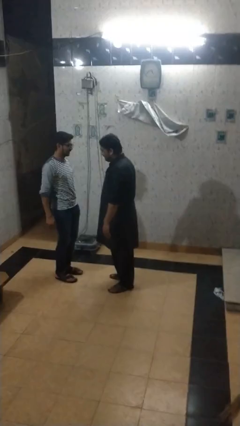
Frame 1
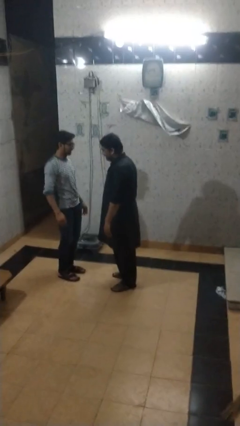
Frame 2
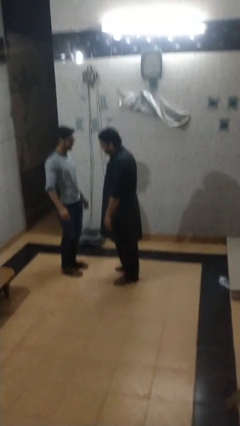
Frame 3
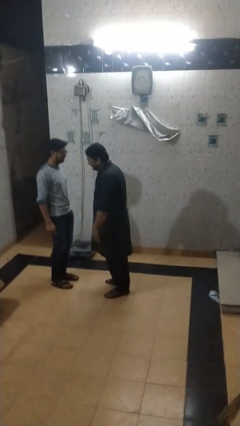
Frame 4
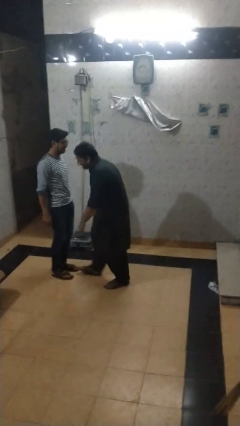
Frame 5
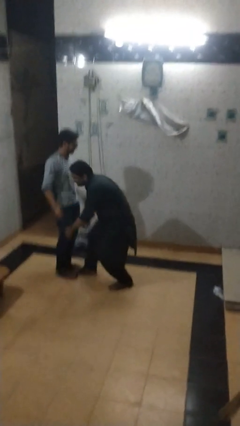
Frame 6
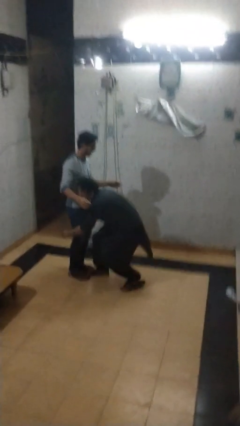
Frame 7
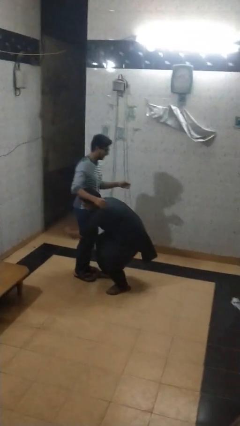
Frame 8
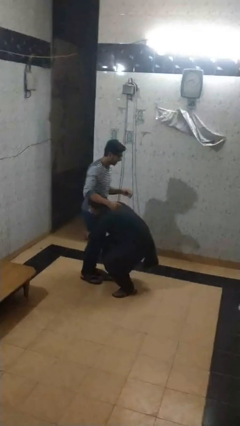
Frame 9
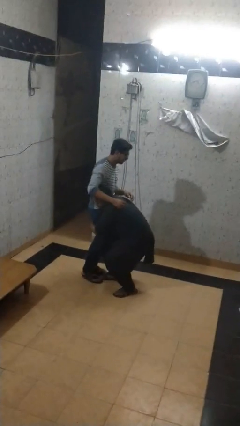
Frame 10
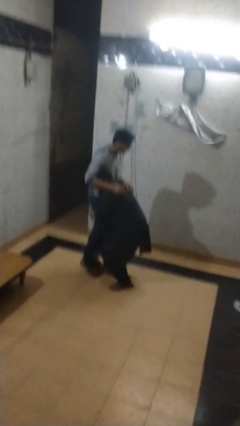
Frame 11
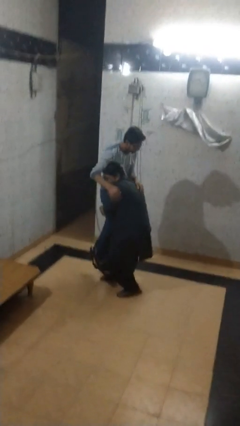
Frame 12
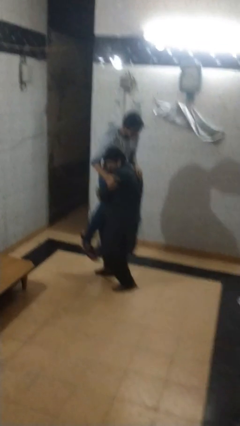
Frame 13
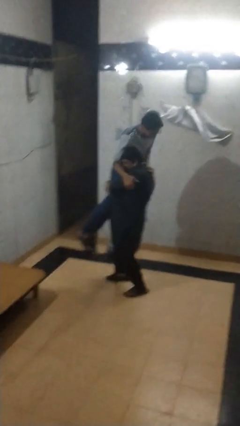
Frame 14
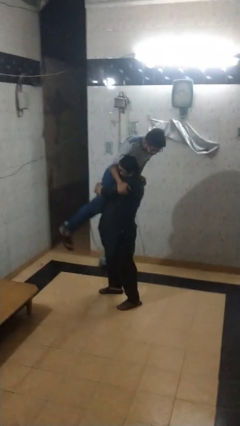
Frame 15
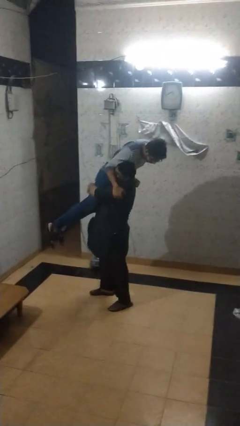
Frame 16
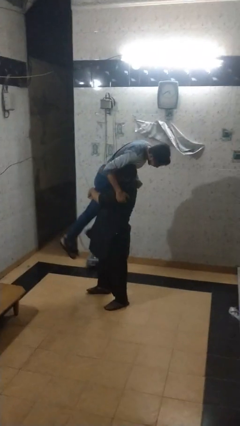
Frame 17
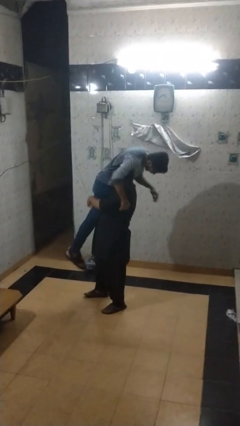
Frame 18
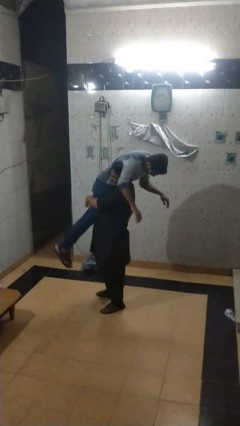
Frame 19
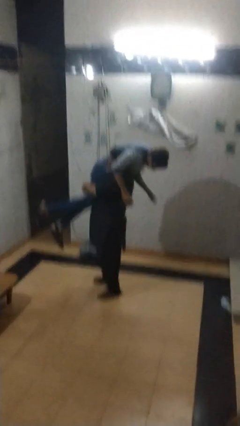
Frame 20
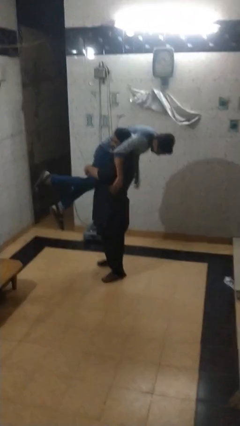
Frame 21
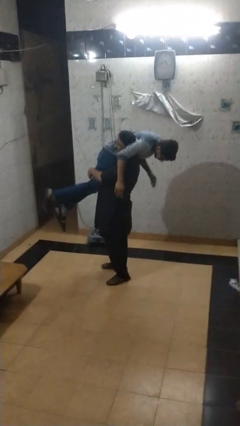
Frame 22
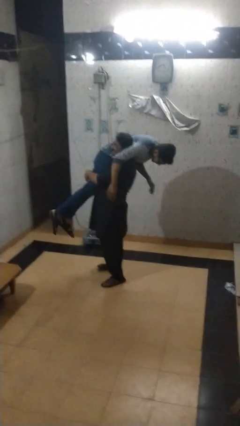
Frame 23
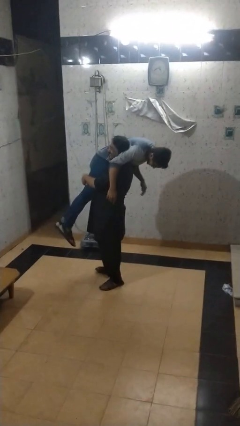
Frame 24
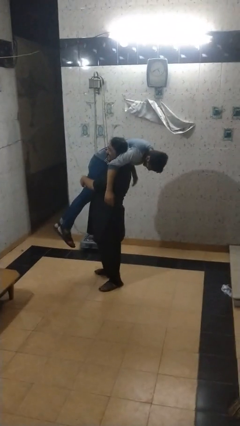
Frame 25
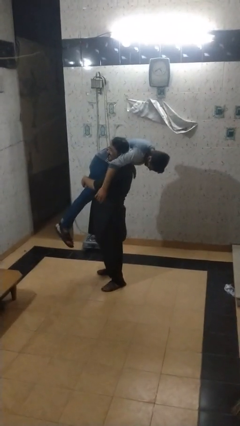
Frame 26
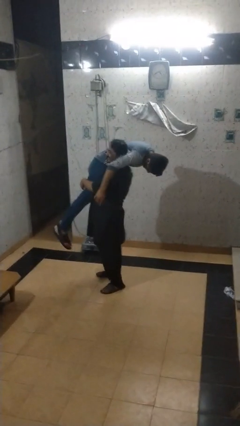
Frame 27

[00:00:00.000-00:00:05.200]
person carries person over shoulder

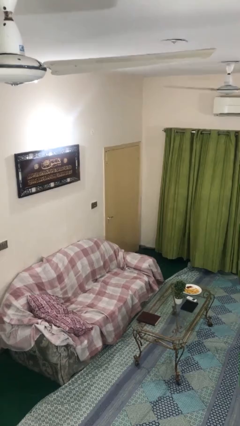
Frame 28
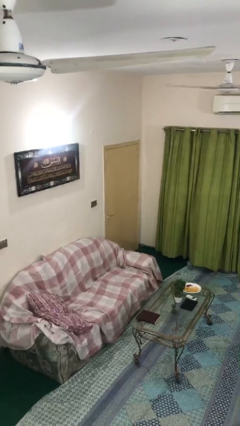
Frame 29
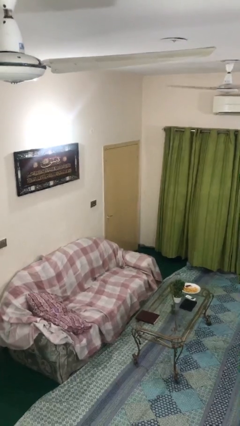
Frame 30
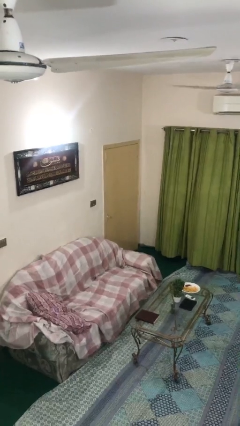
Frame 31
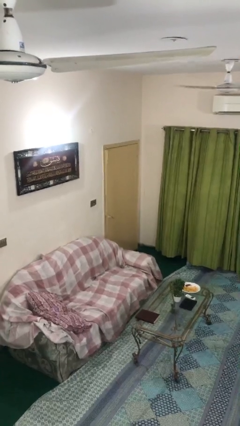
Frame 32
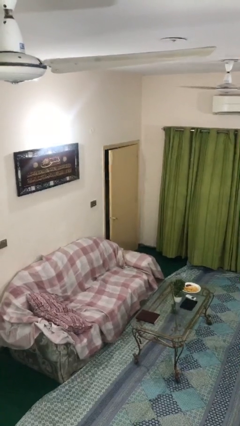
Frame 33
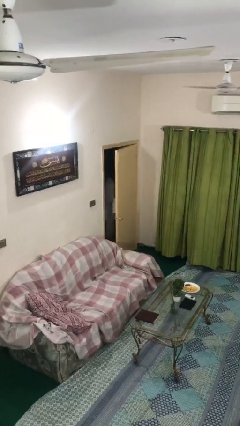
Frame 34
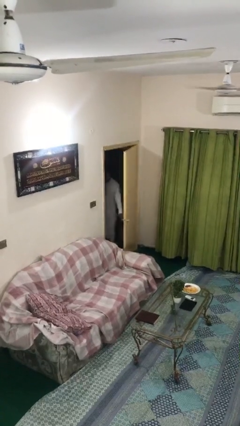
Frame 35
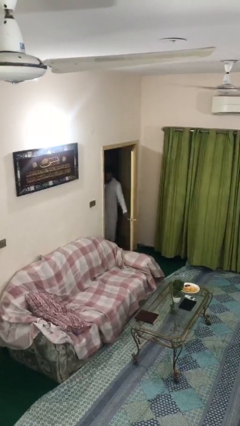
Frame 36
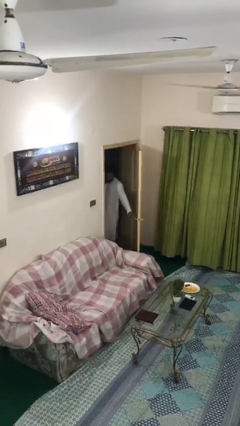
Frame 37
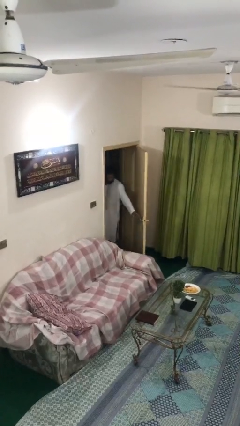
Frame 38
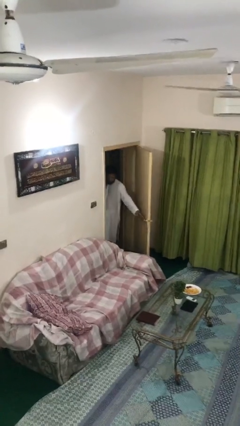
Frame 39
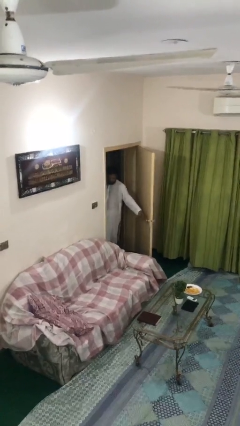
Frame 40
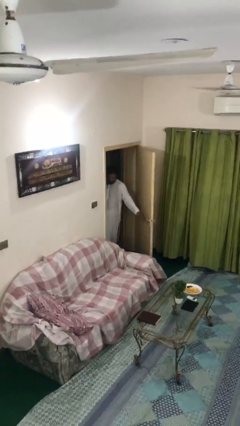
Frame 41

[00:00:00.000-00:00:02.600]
person opens facility door

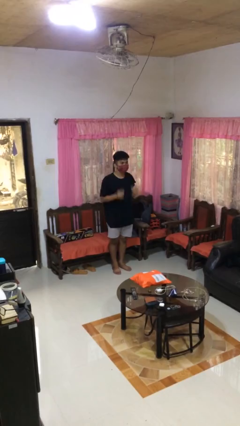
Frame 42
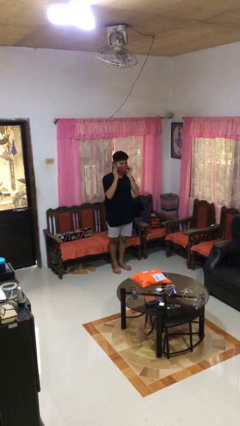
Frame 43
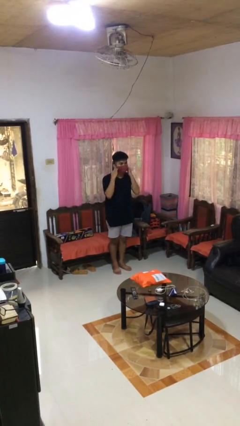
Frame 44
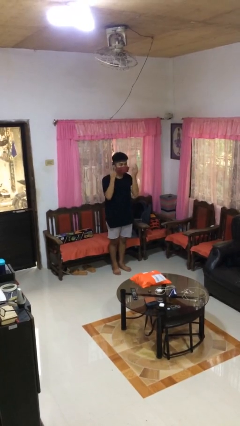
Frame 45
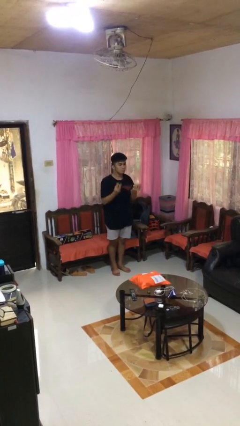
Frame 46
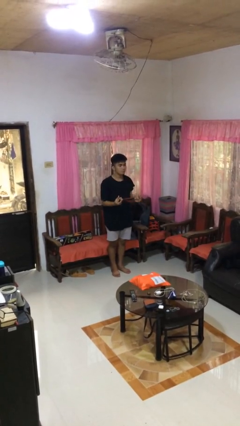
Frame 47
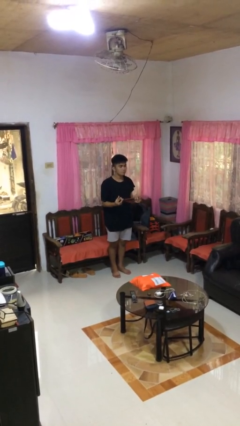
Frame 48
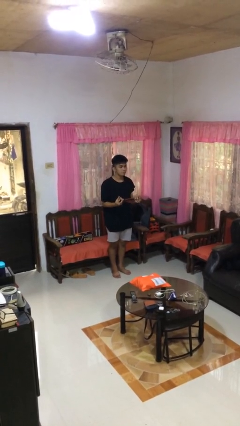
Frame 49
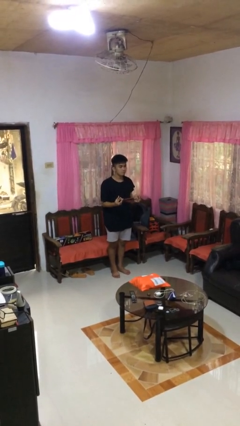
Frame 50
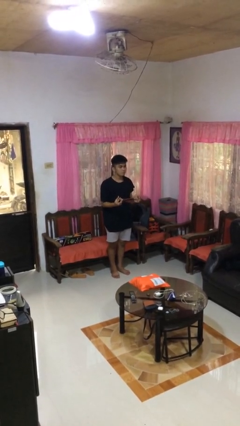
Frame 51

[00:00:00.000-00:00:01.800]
person takes off facemask

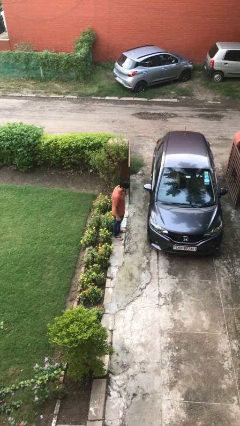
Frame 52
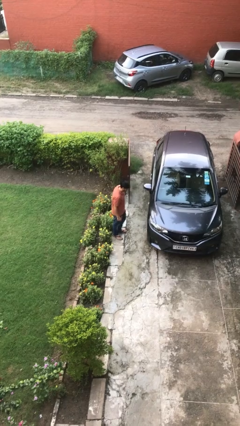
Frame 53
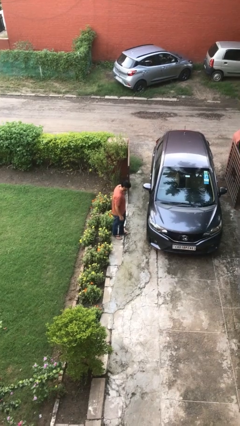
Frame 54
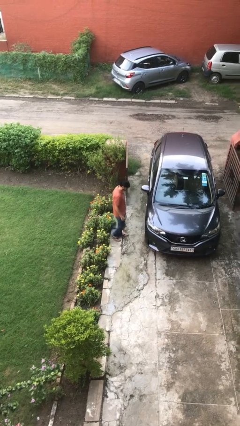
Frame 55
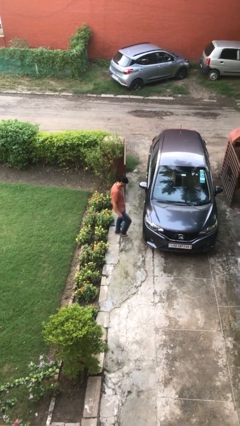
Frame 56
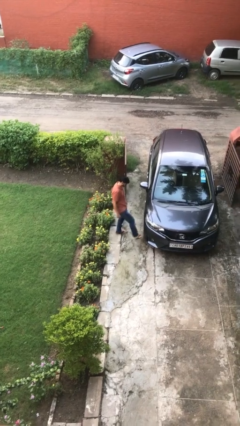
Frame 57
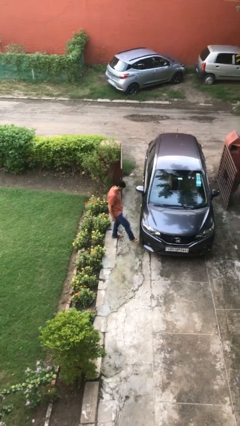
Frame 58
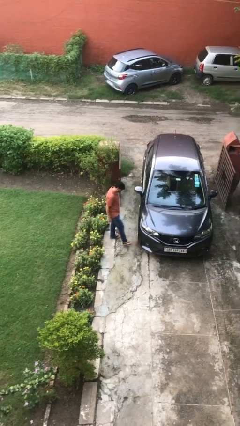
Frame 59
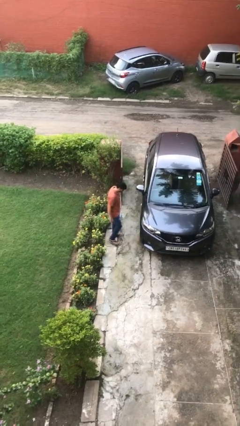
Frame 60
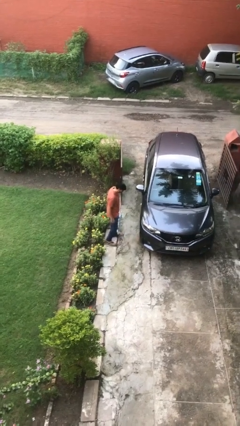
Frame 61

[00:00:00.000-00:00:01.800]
person kicks car tires

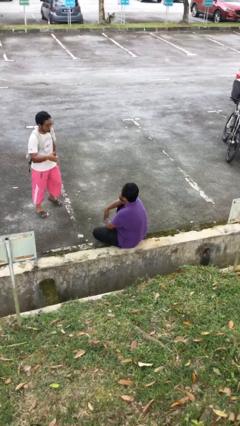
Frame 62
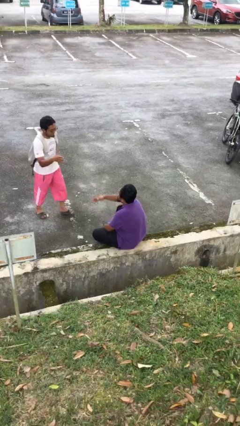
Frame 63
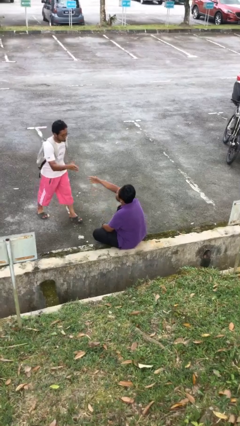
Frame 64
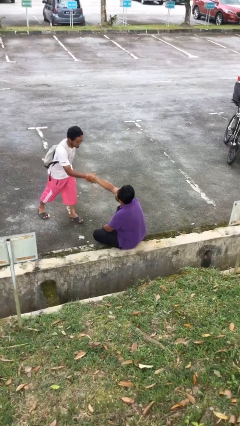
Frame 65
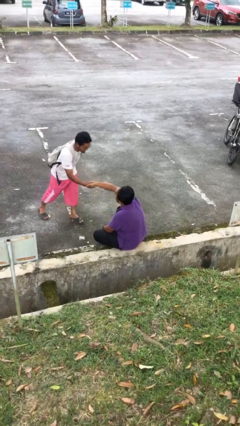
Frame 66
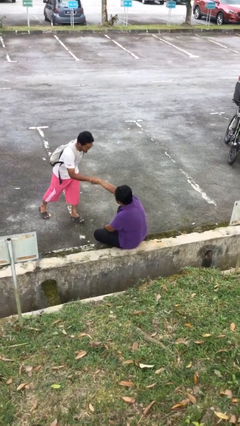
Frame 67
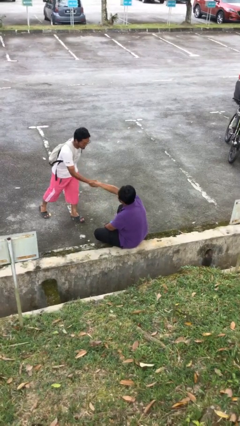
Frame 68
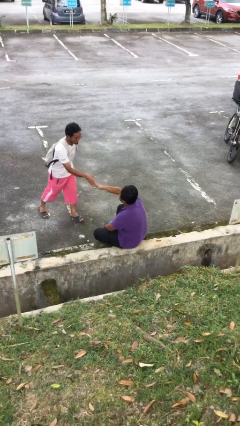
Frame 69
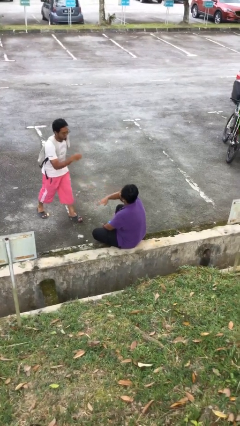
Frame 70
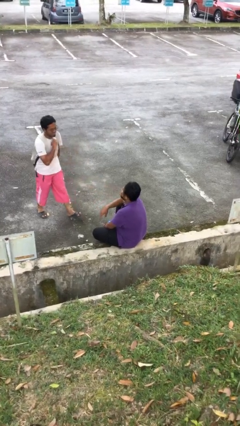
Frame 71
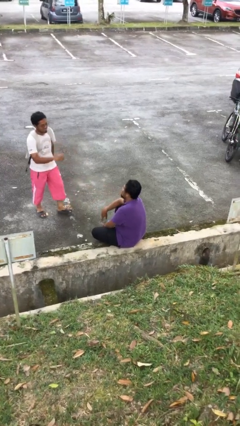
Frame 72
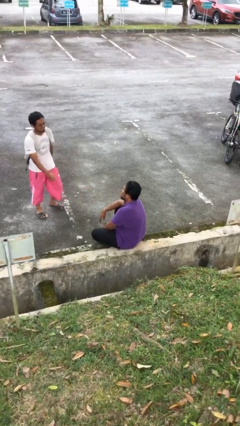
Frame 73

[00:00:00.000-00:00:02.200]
person shakes hand

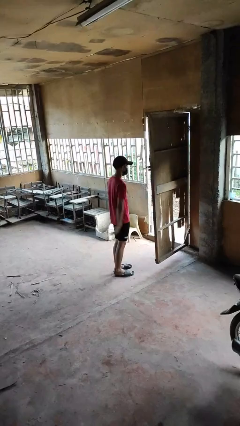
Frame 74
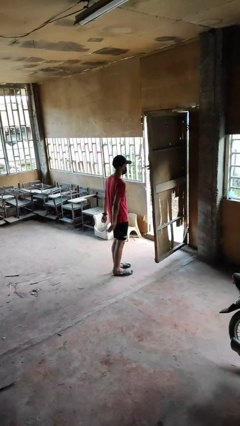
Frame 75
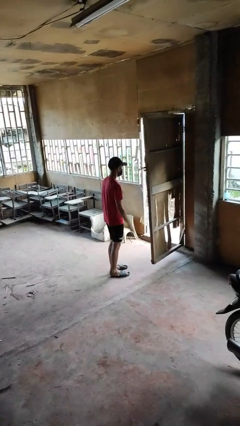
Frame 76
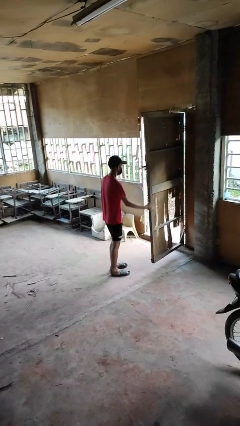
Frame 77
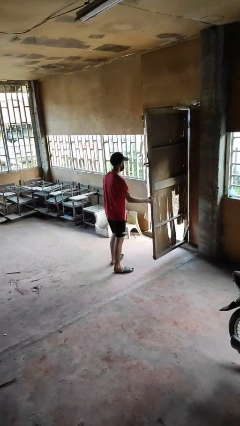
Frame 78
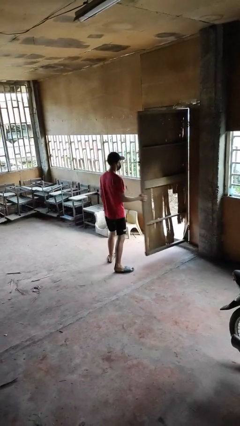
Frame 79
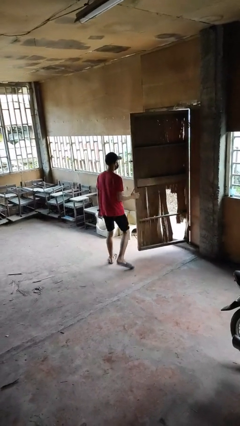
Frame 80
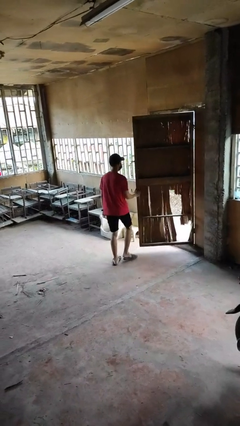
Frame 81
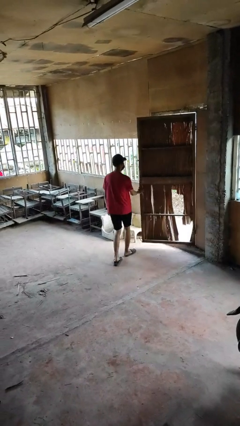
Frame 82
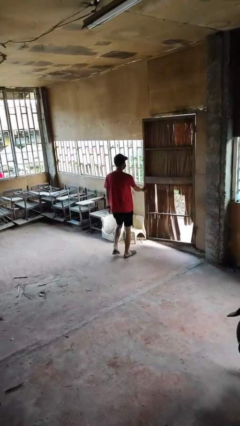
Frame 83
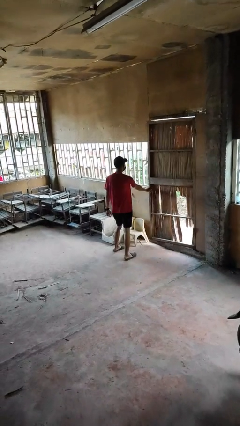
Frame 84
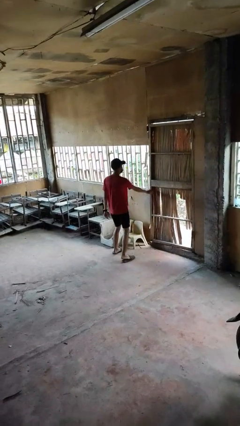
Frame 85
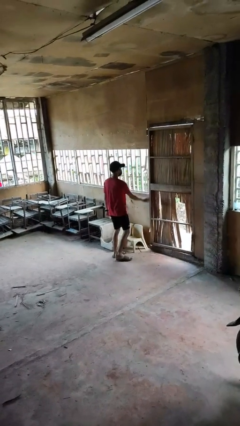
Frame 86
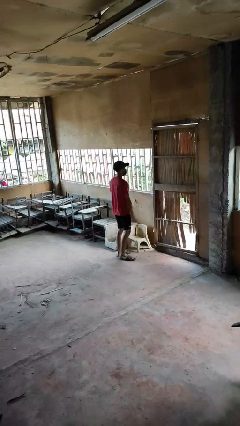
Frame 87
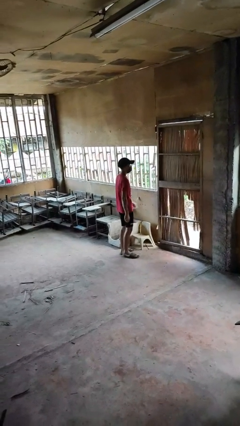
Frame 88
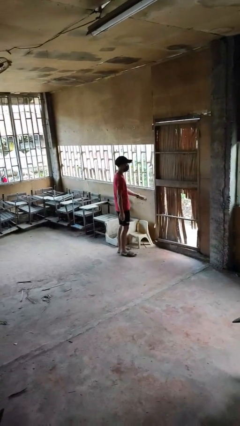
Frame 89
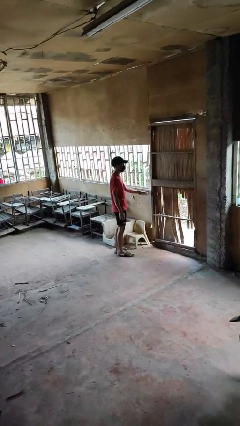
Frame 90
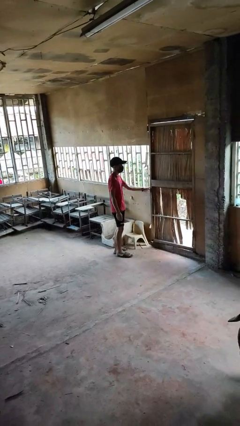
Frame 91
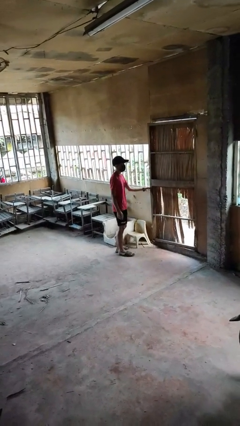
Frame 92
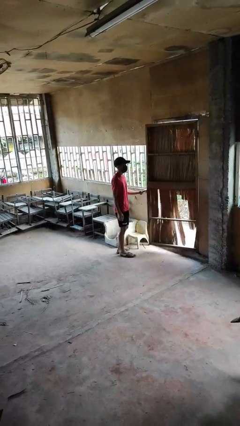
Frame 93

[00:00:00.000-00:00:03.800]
person closes facility door
